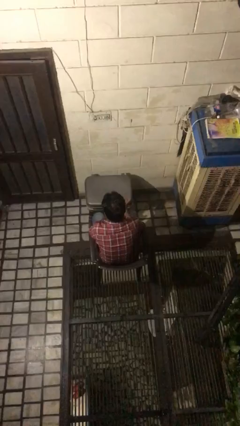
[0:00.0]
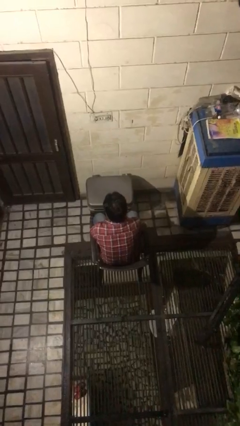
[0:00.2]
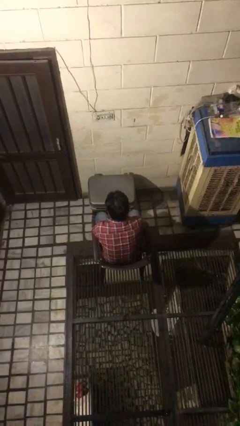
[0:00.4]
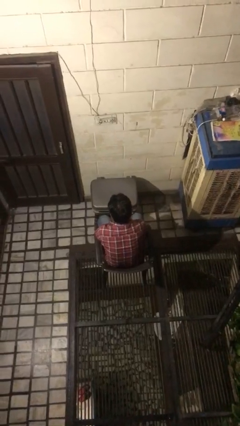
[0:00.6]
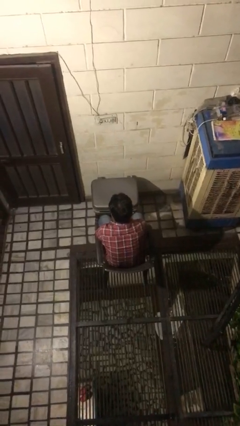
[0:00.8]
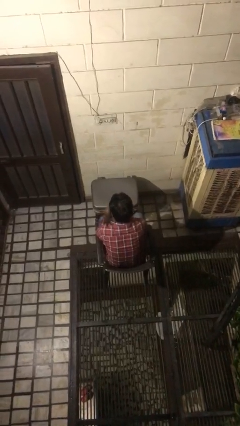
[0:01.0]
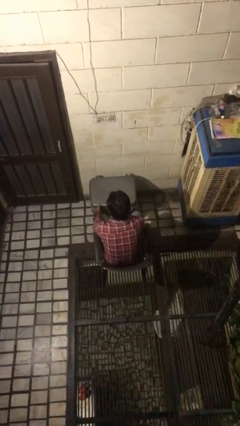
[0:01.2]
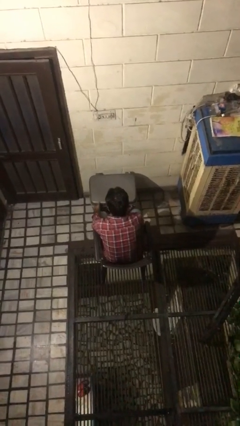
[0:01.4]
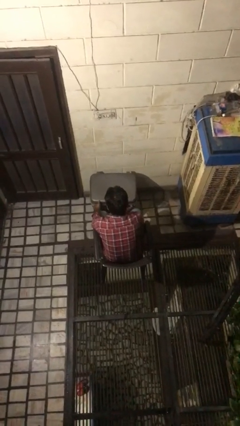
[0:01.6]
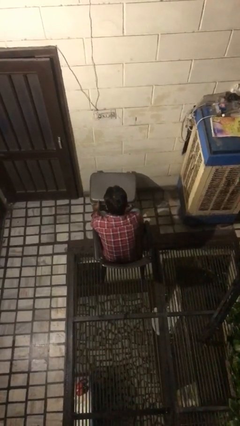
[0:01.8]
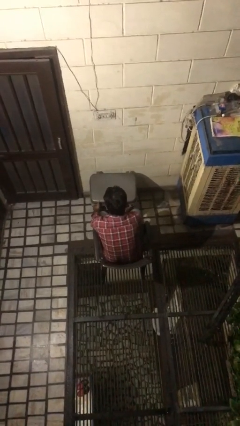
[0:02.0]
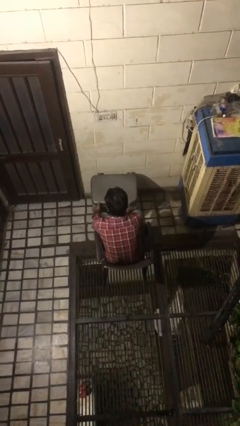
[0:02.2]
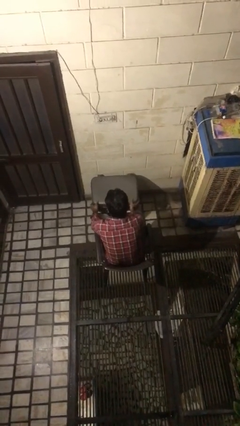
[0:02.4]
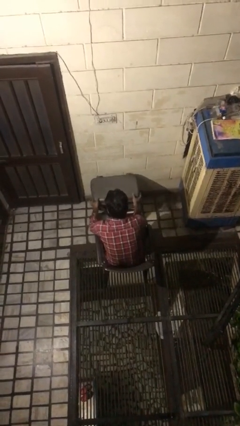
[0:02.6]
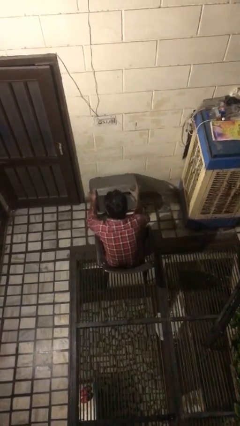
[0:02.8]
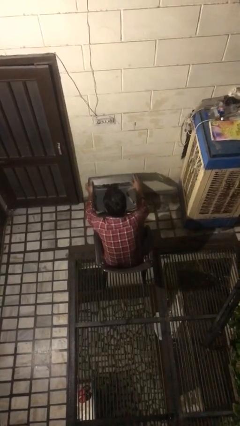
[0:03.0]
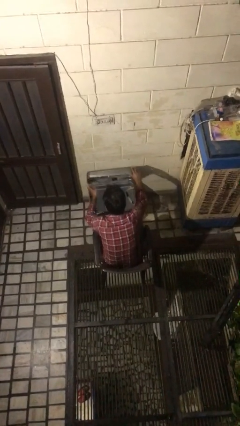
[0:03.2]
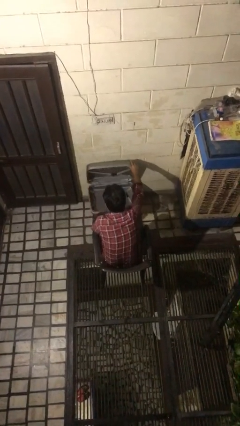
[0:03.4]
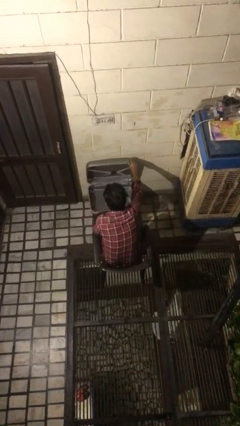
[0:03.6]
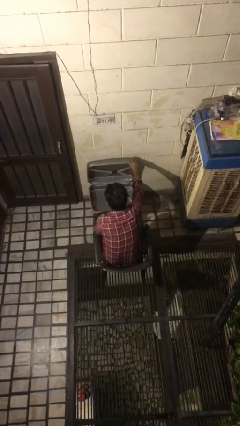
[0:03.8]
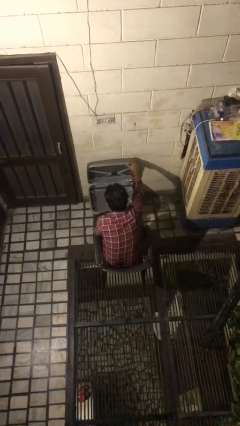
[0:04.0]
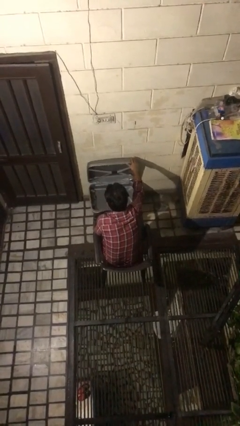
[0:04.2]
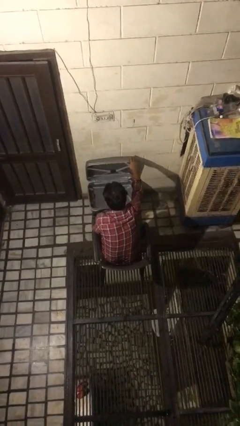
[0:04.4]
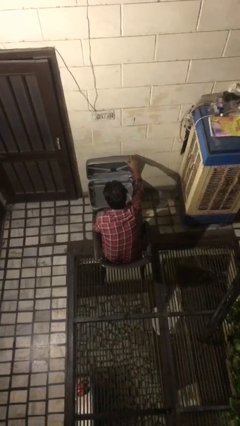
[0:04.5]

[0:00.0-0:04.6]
person opens suitcase

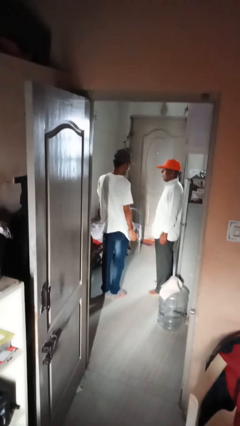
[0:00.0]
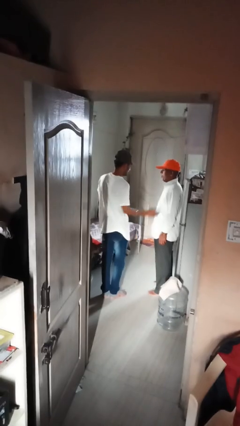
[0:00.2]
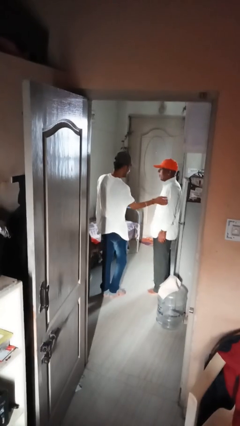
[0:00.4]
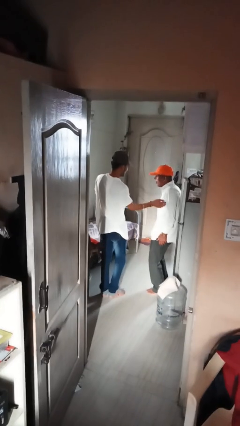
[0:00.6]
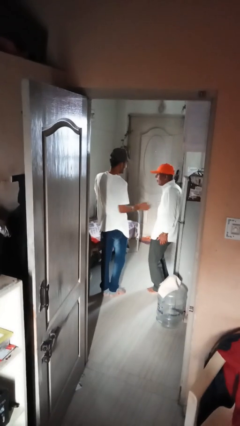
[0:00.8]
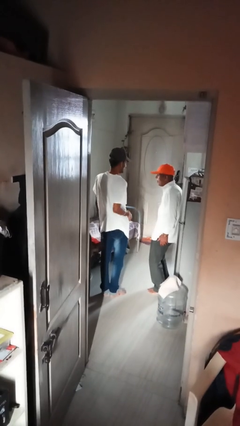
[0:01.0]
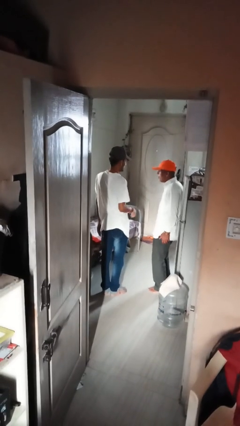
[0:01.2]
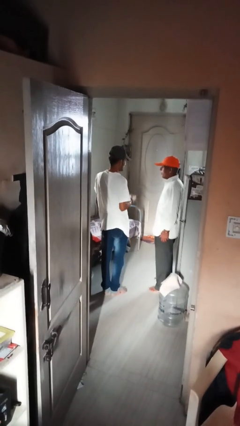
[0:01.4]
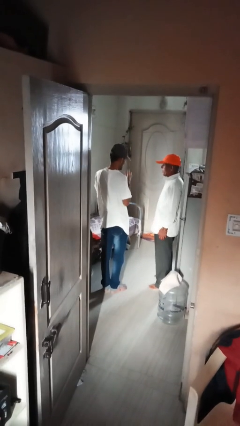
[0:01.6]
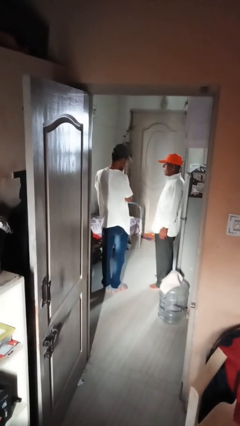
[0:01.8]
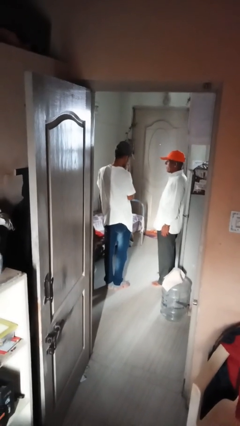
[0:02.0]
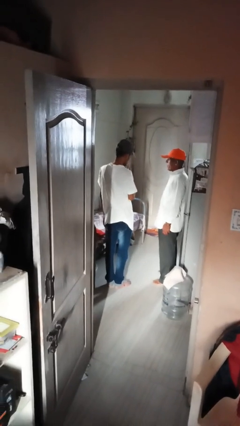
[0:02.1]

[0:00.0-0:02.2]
person tickles person

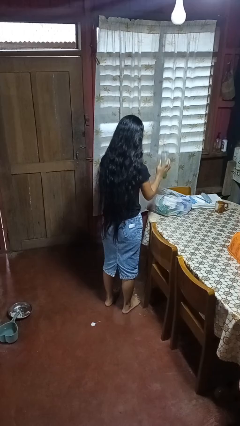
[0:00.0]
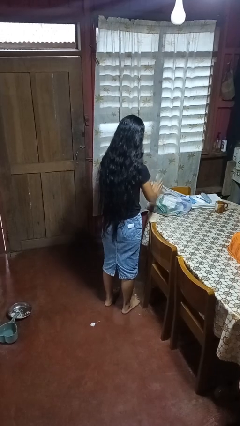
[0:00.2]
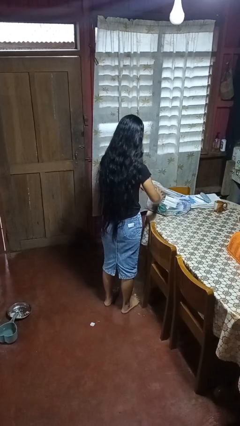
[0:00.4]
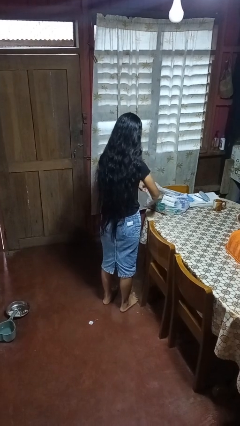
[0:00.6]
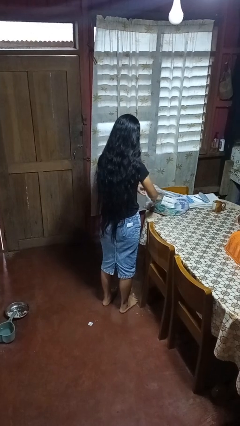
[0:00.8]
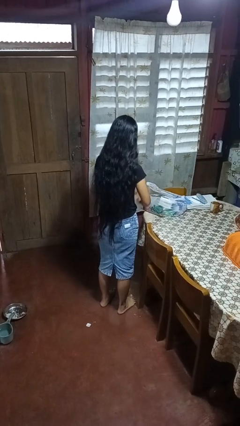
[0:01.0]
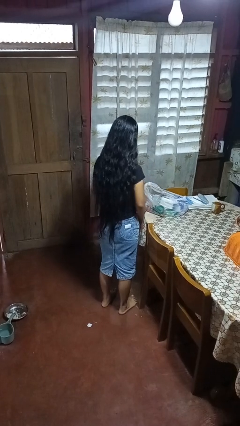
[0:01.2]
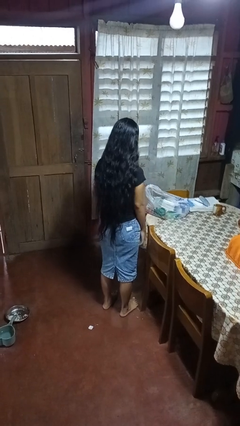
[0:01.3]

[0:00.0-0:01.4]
person puts object into bag

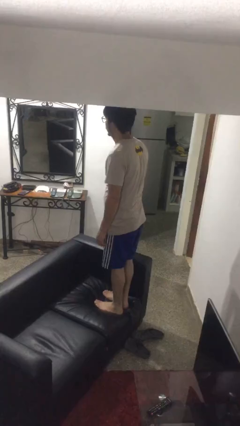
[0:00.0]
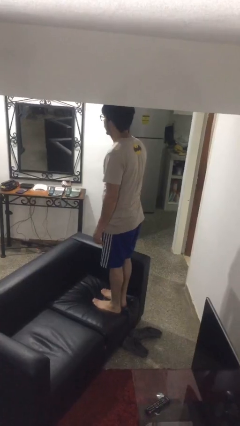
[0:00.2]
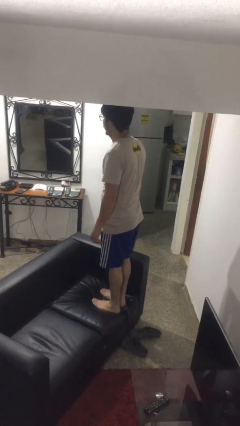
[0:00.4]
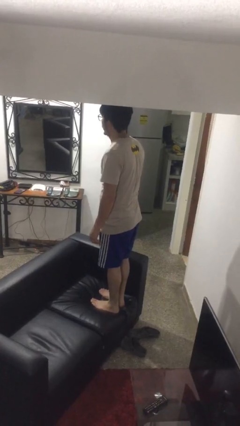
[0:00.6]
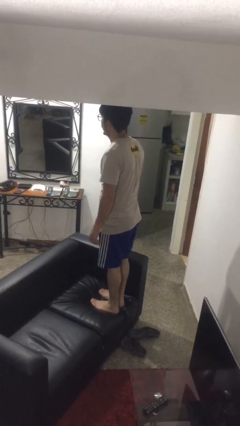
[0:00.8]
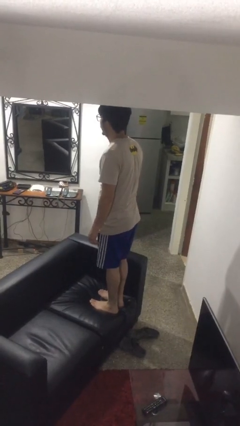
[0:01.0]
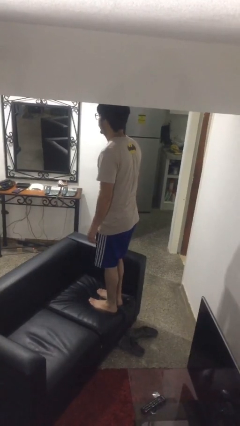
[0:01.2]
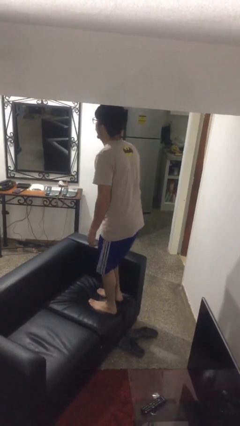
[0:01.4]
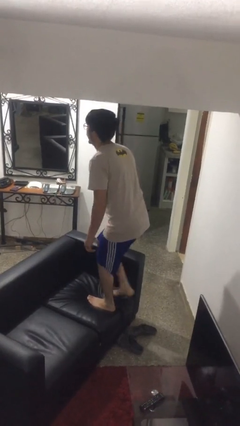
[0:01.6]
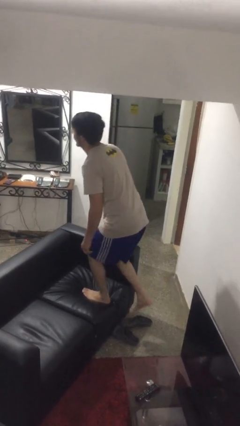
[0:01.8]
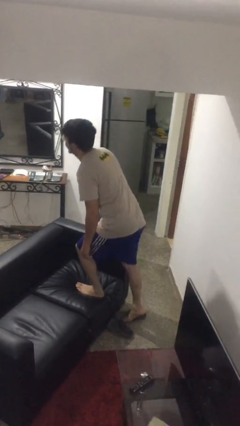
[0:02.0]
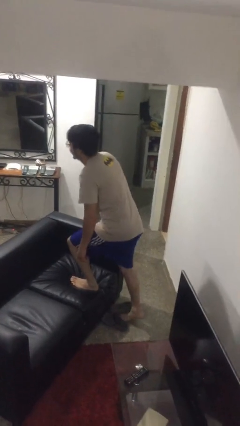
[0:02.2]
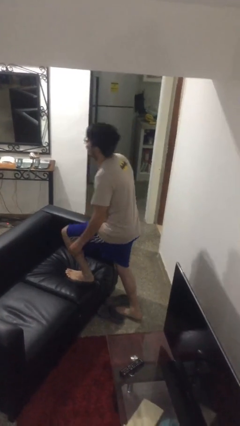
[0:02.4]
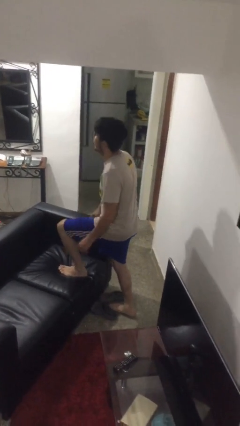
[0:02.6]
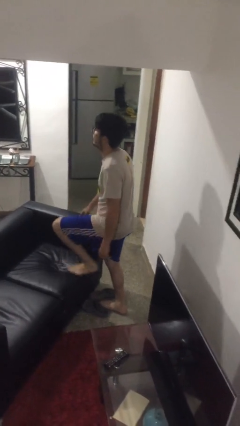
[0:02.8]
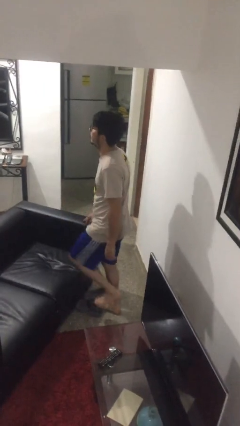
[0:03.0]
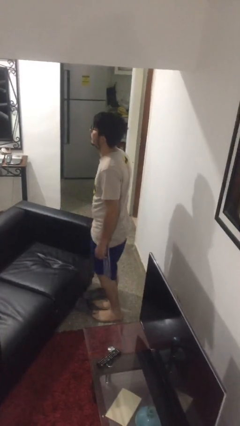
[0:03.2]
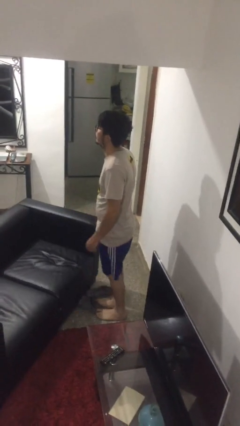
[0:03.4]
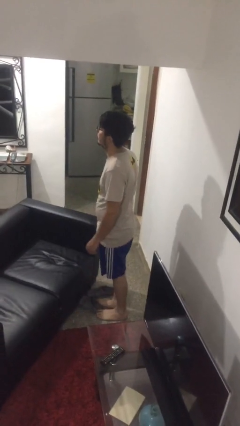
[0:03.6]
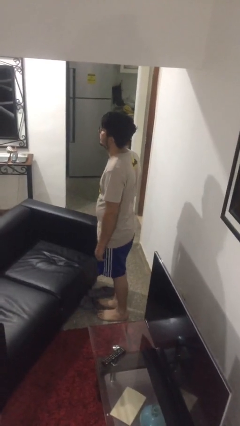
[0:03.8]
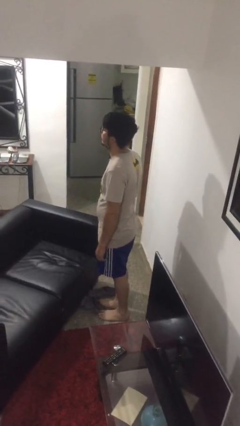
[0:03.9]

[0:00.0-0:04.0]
person climbs off couch

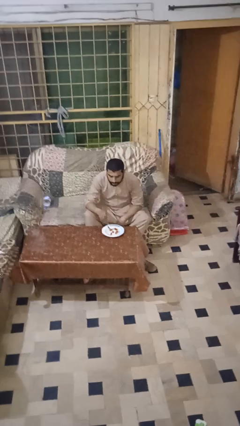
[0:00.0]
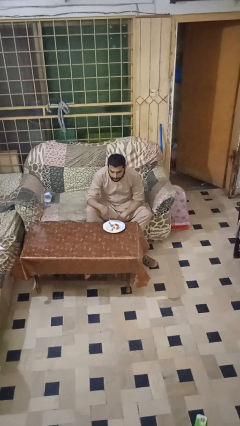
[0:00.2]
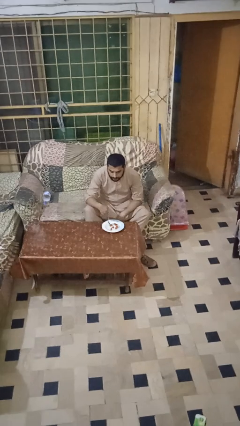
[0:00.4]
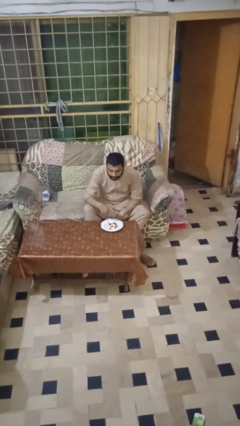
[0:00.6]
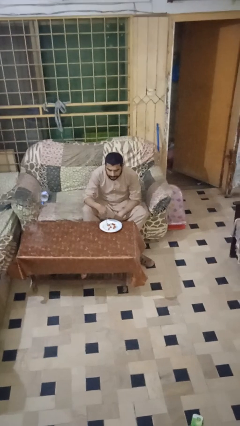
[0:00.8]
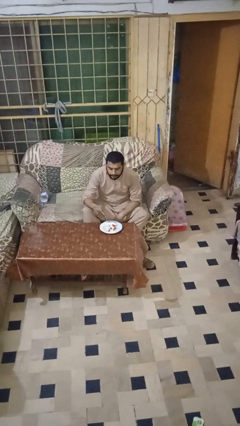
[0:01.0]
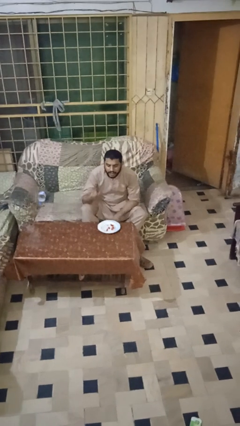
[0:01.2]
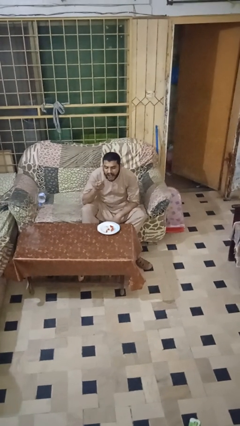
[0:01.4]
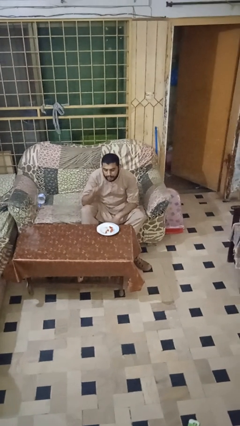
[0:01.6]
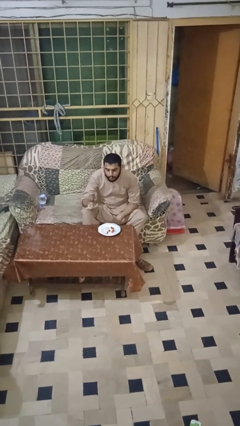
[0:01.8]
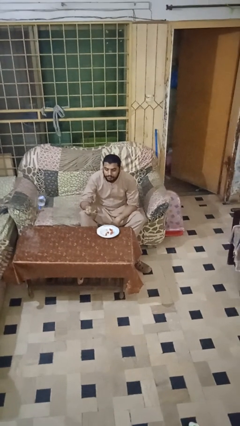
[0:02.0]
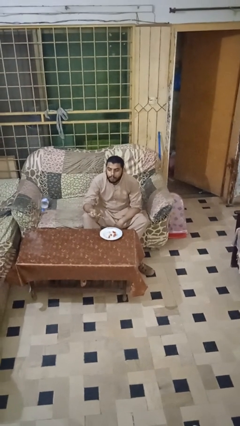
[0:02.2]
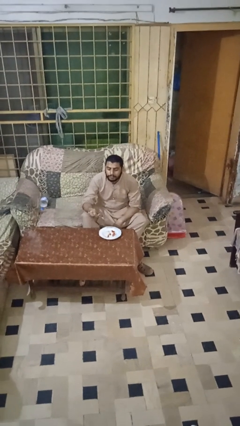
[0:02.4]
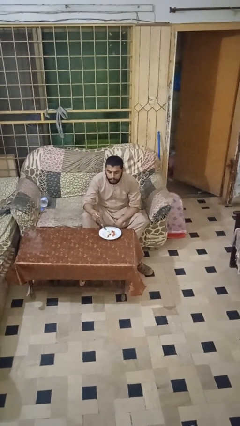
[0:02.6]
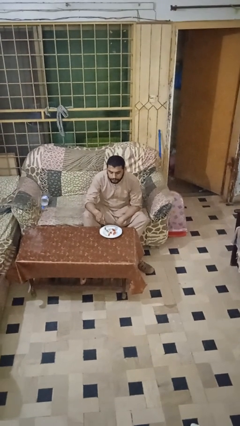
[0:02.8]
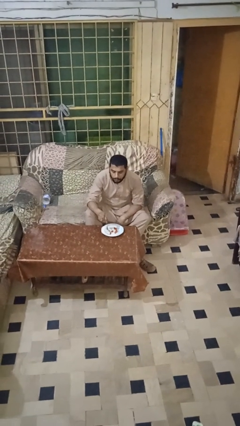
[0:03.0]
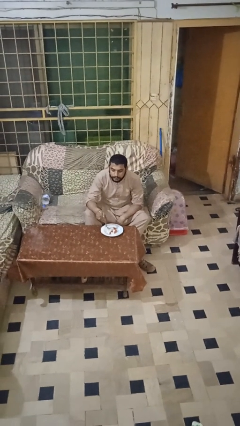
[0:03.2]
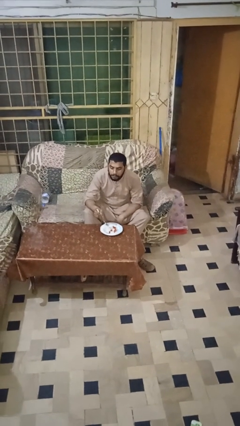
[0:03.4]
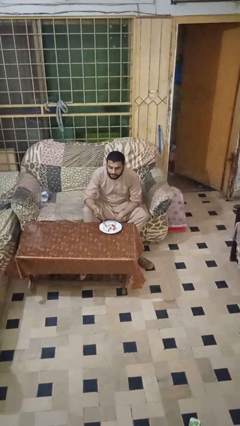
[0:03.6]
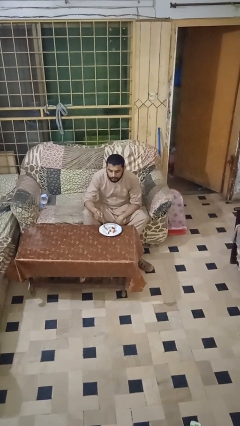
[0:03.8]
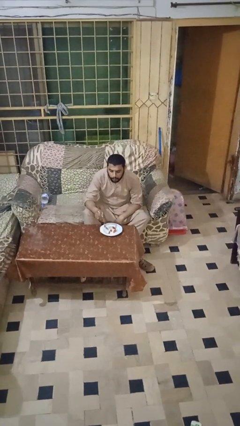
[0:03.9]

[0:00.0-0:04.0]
person eats with utensil

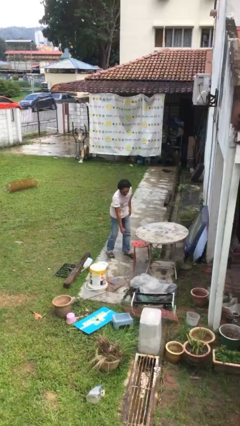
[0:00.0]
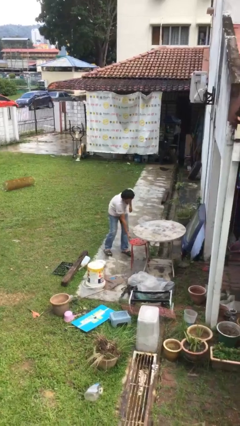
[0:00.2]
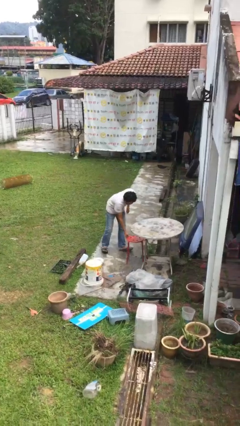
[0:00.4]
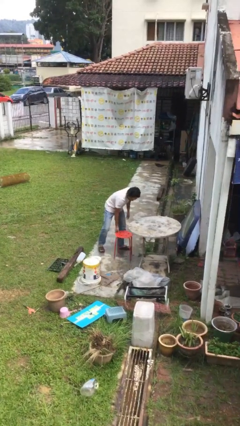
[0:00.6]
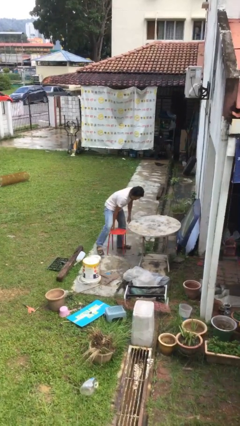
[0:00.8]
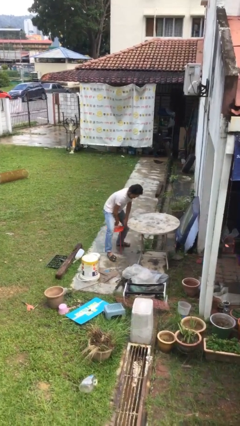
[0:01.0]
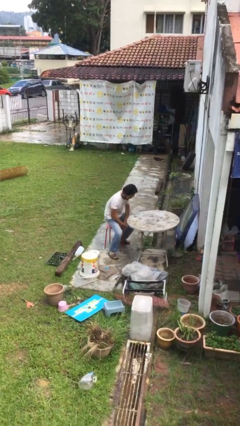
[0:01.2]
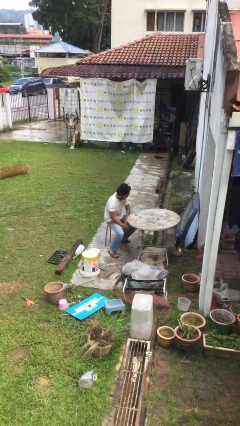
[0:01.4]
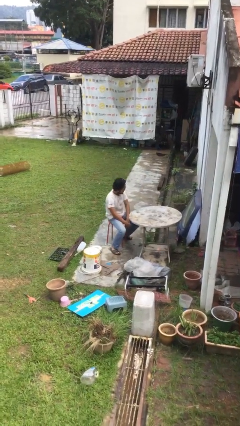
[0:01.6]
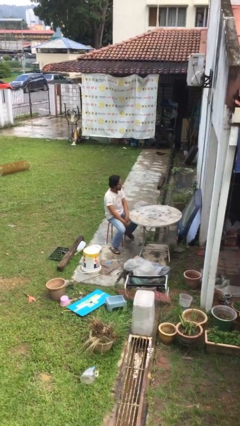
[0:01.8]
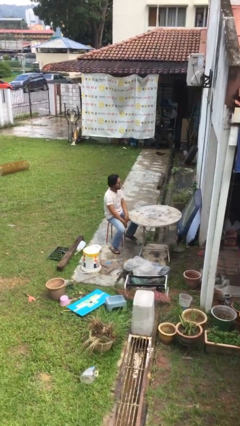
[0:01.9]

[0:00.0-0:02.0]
person sits down
